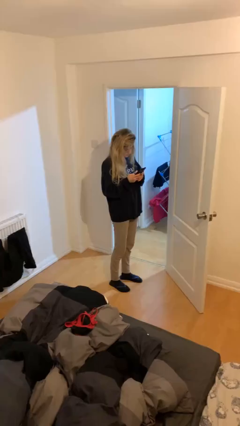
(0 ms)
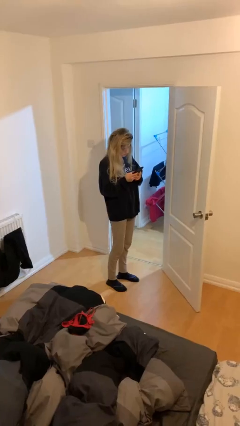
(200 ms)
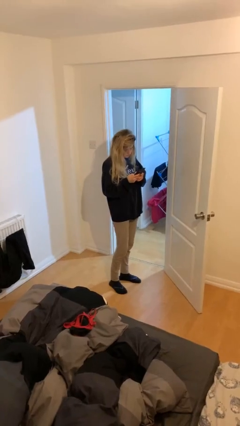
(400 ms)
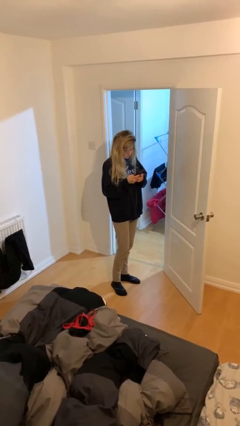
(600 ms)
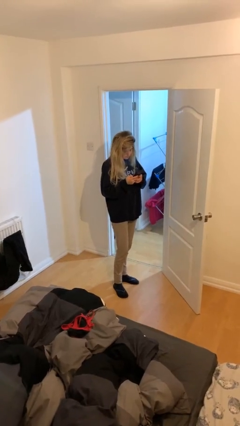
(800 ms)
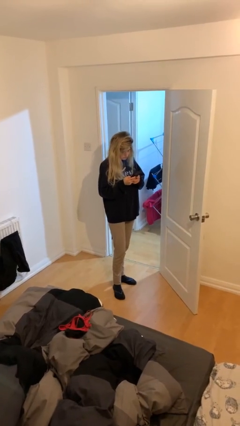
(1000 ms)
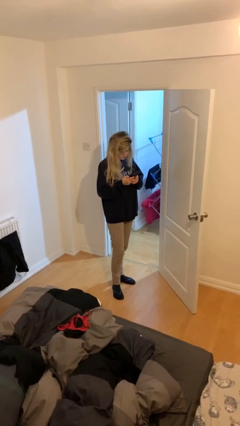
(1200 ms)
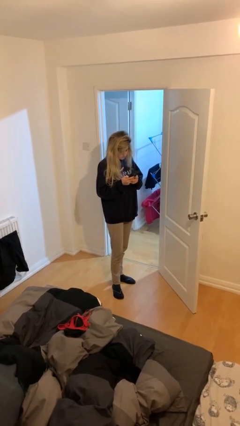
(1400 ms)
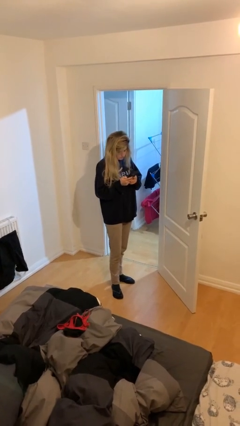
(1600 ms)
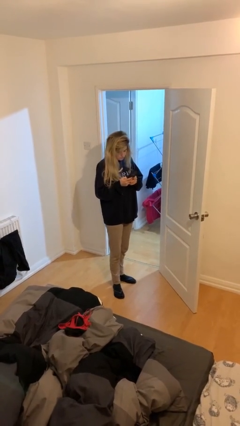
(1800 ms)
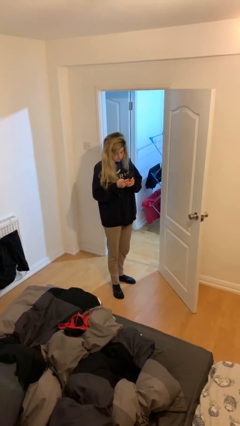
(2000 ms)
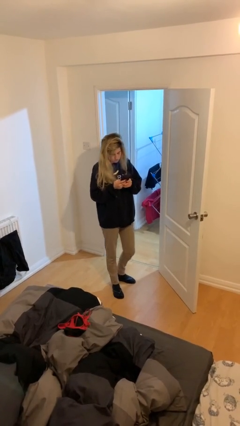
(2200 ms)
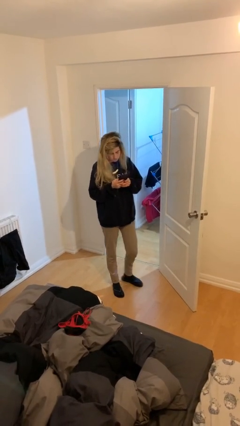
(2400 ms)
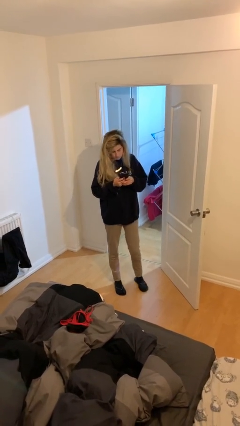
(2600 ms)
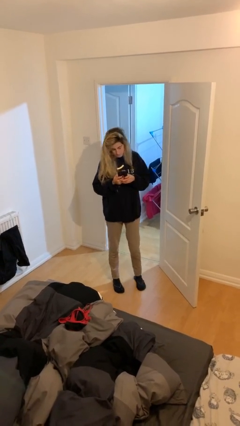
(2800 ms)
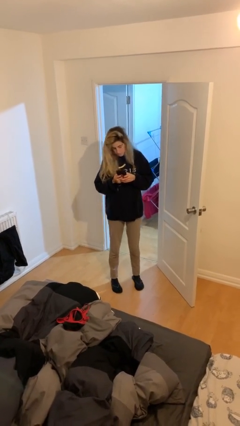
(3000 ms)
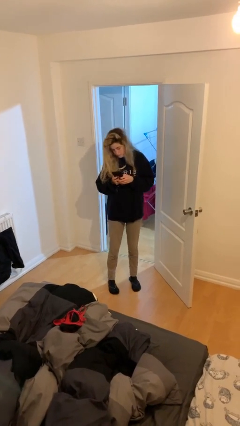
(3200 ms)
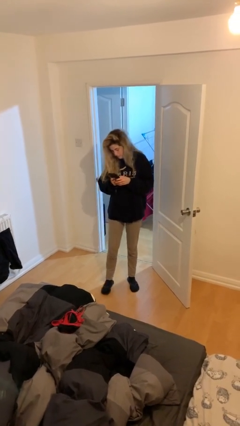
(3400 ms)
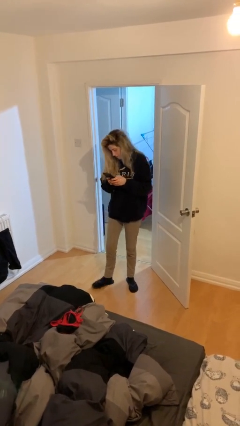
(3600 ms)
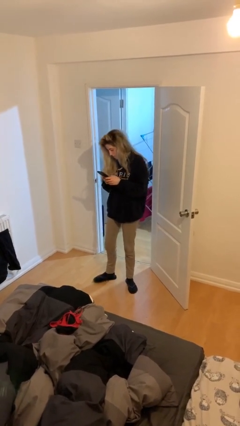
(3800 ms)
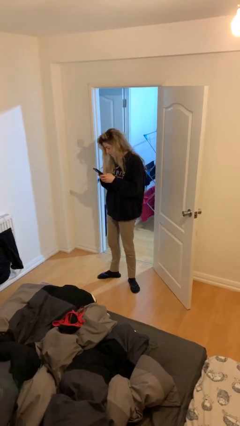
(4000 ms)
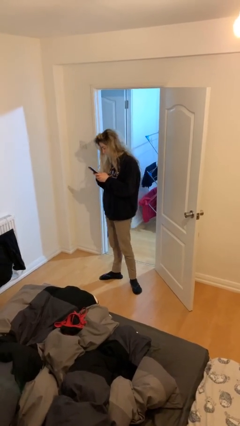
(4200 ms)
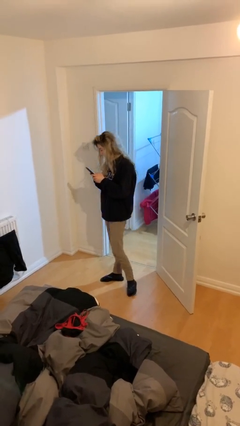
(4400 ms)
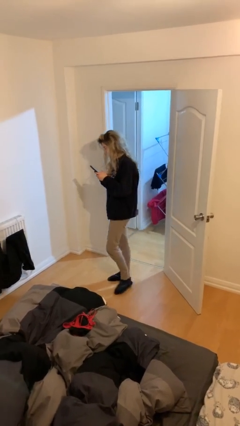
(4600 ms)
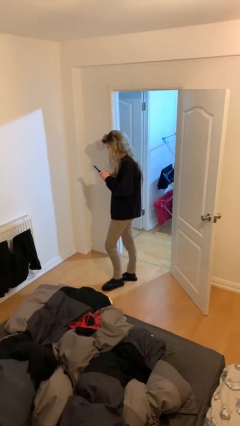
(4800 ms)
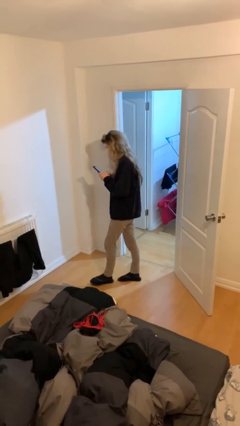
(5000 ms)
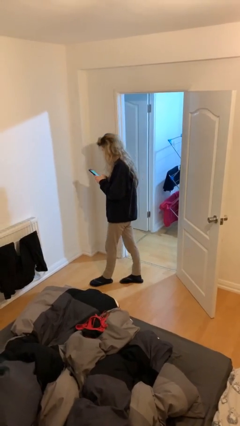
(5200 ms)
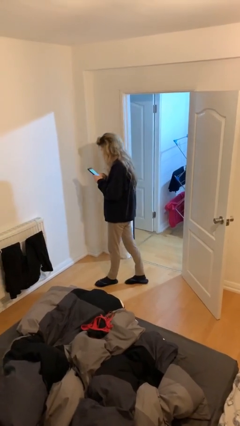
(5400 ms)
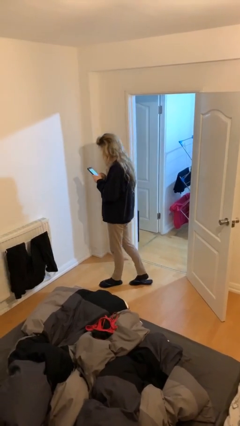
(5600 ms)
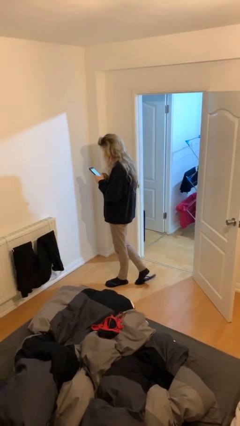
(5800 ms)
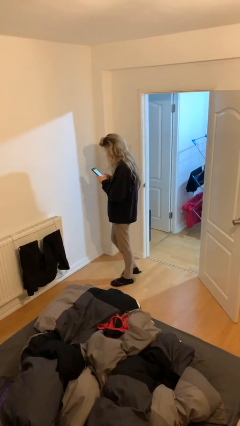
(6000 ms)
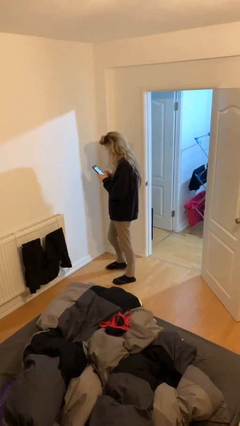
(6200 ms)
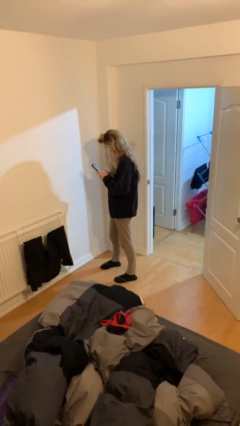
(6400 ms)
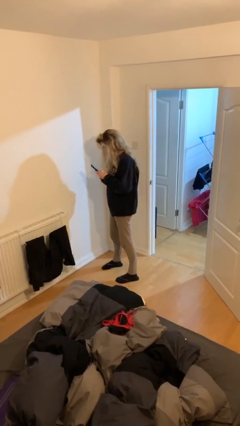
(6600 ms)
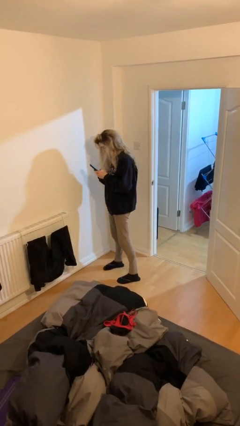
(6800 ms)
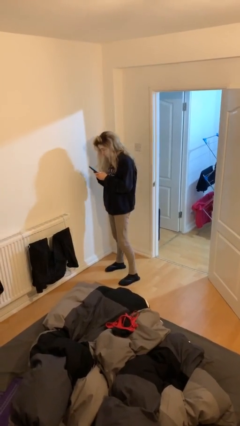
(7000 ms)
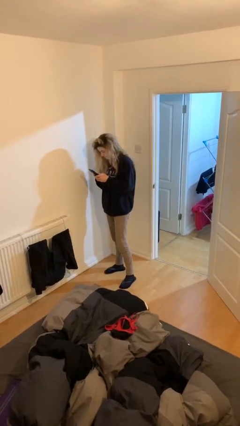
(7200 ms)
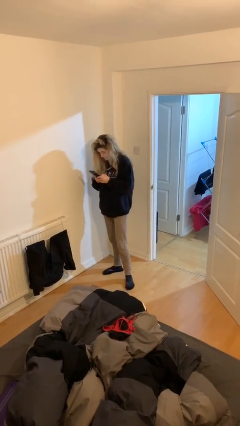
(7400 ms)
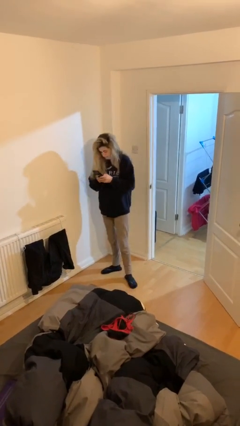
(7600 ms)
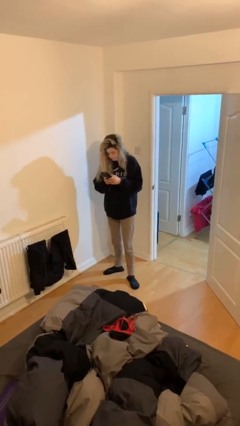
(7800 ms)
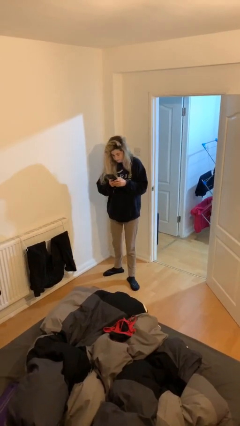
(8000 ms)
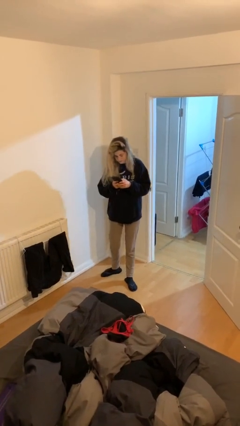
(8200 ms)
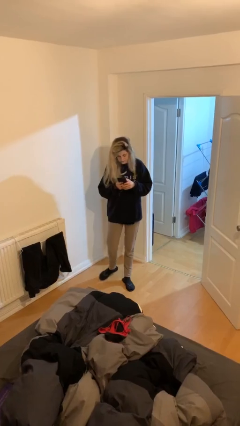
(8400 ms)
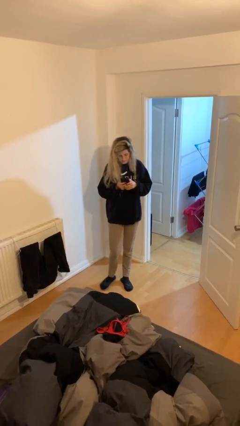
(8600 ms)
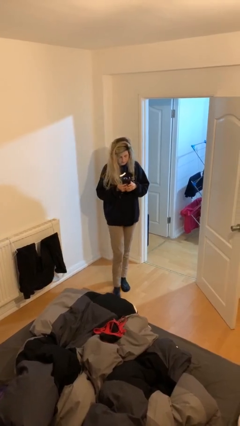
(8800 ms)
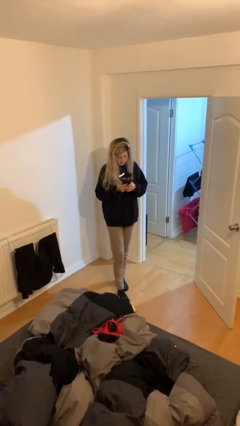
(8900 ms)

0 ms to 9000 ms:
person texts on phone

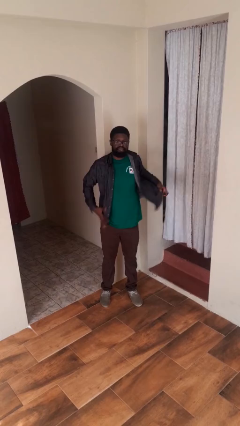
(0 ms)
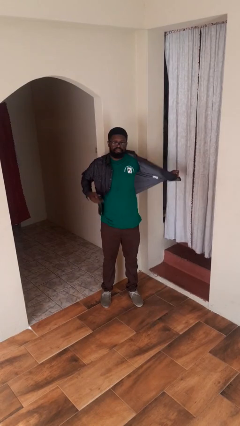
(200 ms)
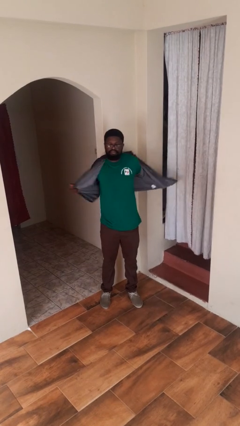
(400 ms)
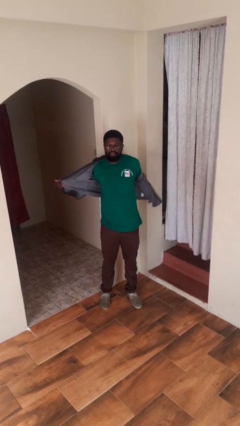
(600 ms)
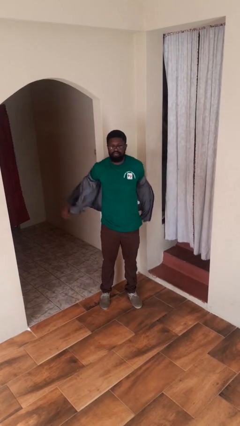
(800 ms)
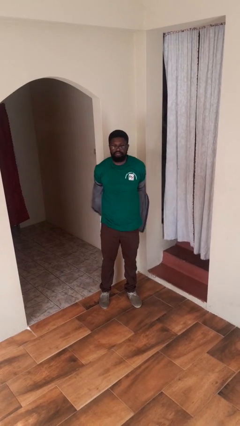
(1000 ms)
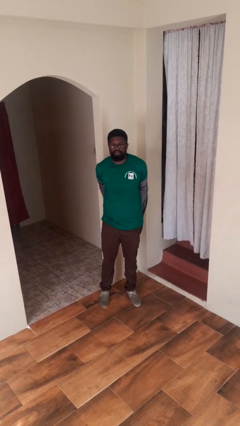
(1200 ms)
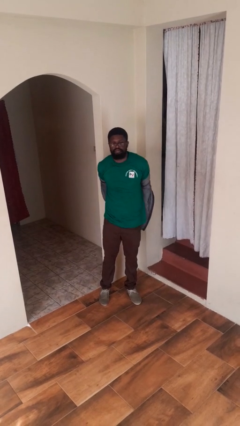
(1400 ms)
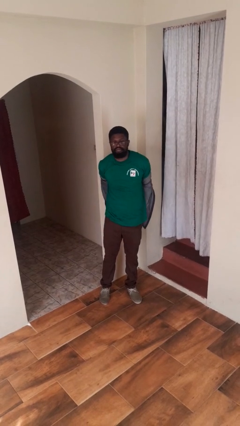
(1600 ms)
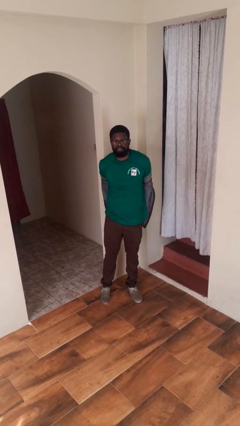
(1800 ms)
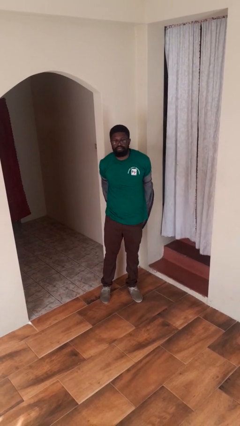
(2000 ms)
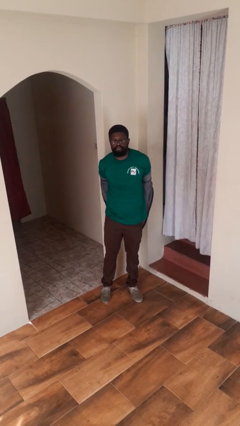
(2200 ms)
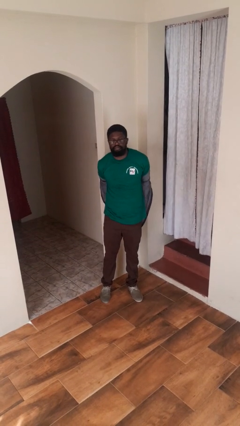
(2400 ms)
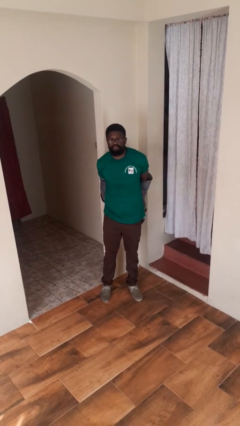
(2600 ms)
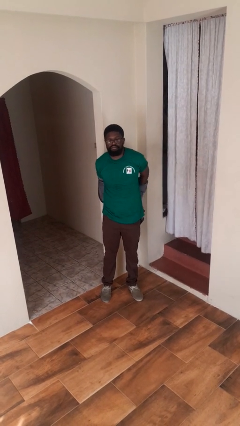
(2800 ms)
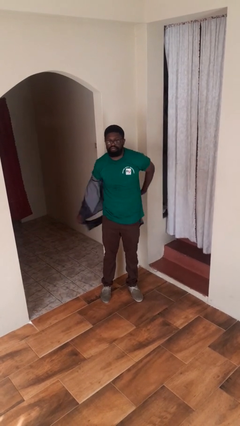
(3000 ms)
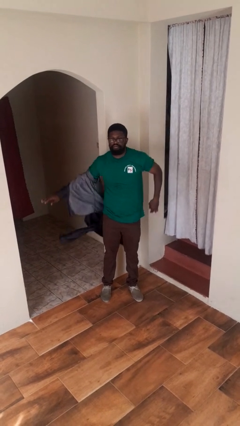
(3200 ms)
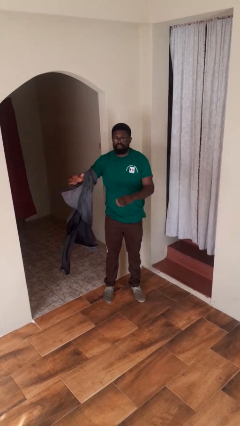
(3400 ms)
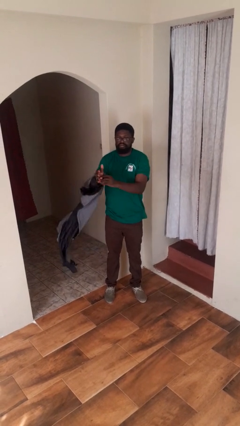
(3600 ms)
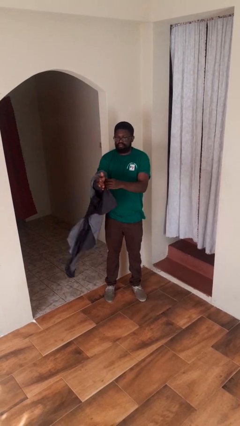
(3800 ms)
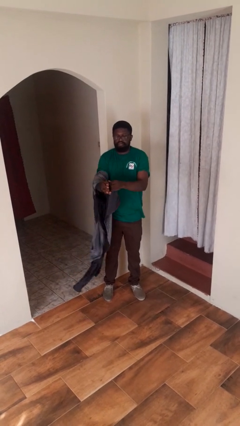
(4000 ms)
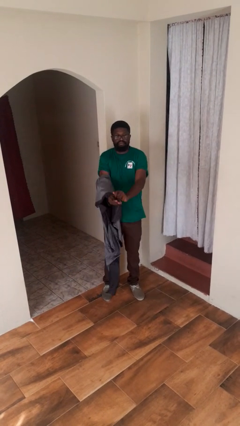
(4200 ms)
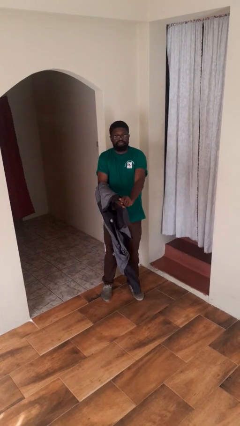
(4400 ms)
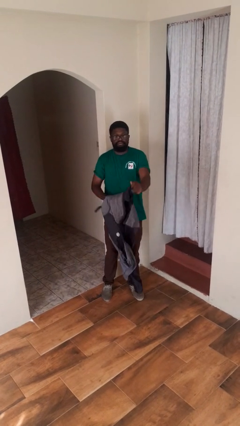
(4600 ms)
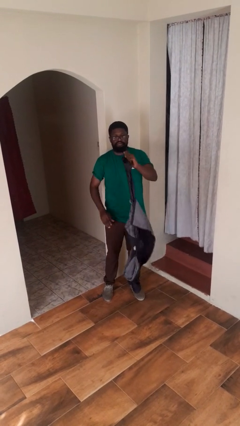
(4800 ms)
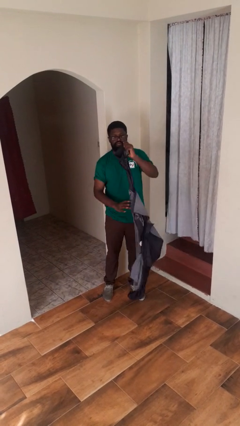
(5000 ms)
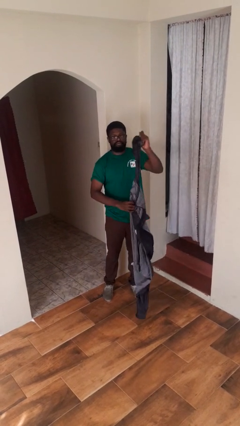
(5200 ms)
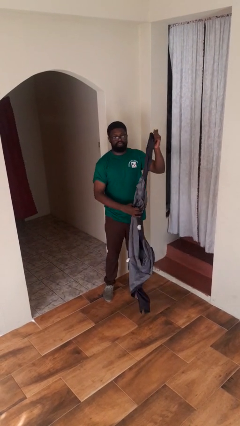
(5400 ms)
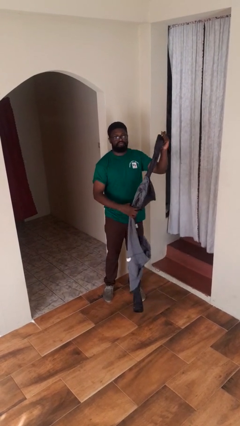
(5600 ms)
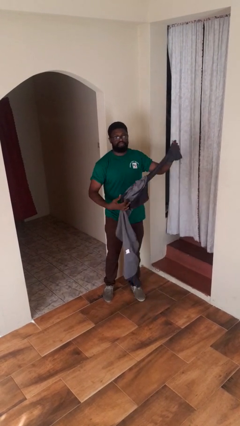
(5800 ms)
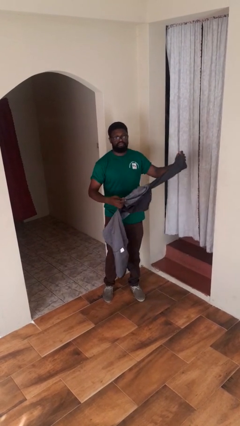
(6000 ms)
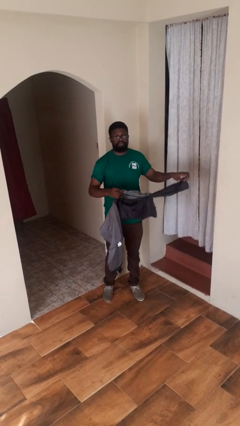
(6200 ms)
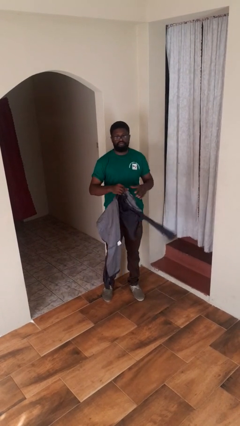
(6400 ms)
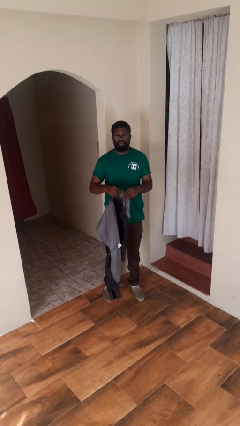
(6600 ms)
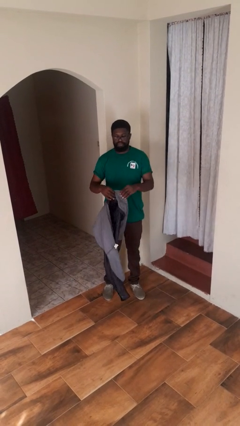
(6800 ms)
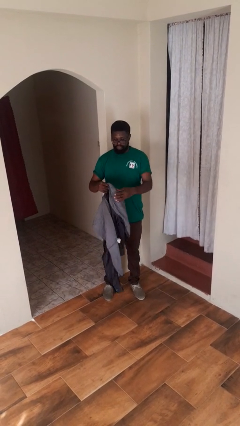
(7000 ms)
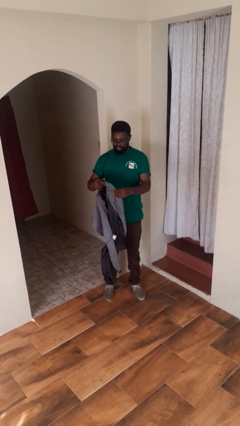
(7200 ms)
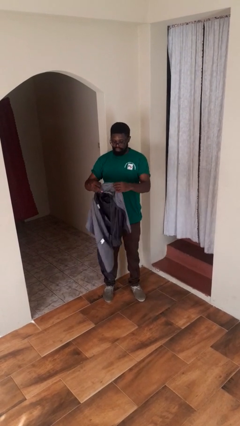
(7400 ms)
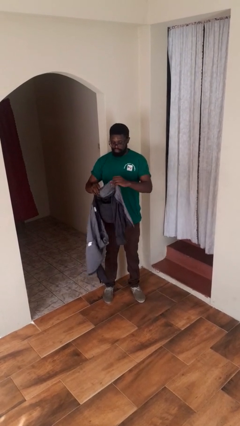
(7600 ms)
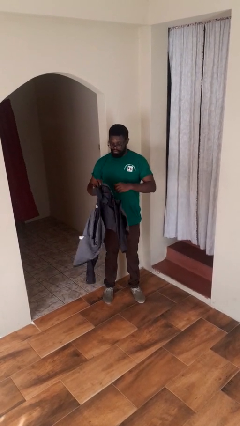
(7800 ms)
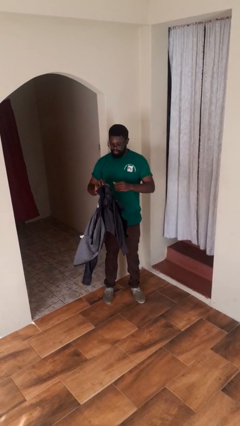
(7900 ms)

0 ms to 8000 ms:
person takes off shirt

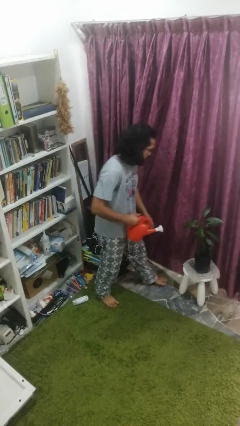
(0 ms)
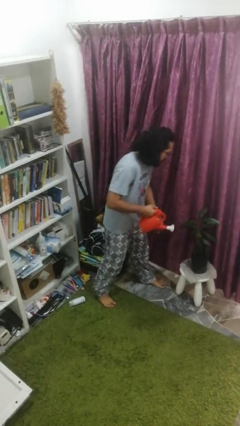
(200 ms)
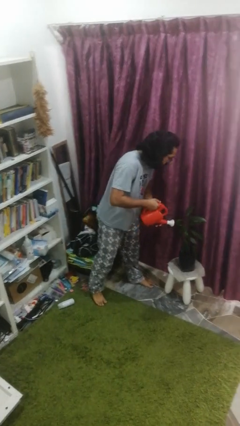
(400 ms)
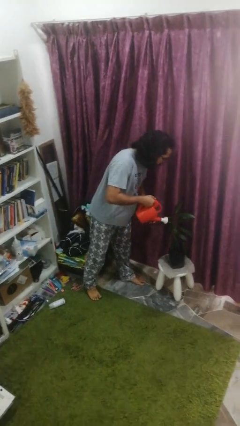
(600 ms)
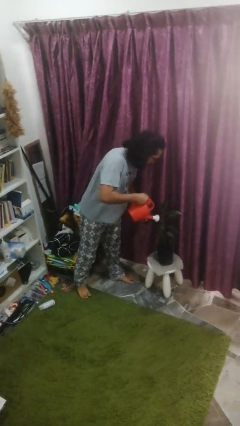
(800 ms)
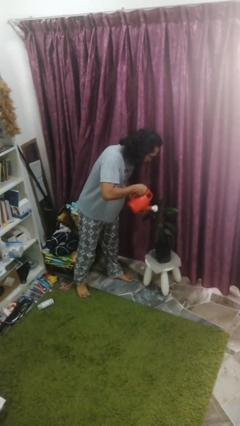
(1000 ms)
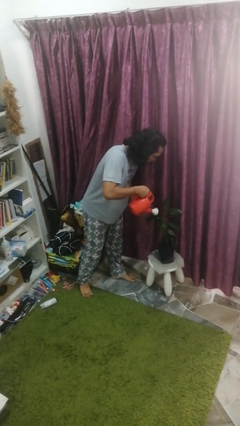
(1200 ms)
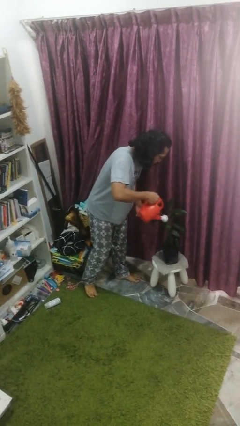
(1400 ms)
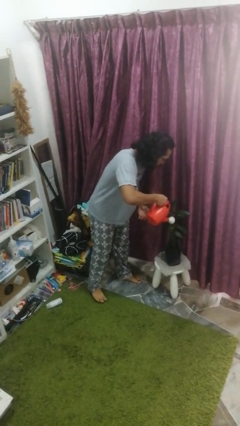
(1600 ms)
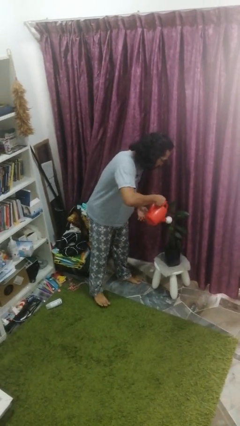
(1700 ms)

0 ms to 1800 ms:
person waters houseplant
